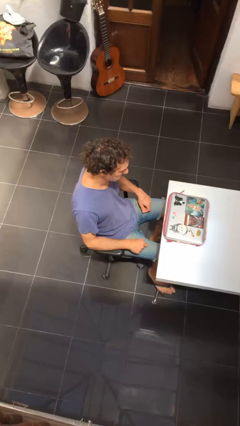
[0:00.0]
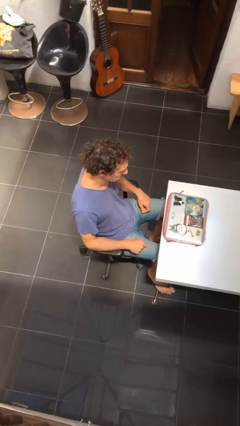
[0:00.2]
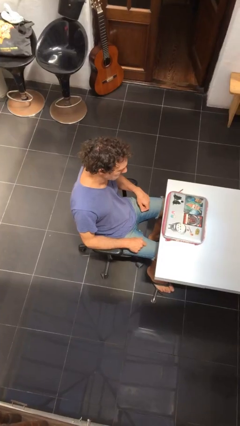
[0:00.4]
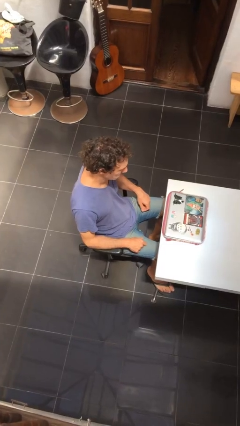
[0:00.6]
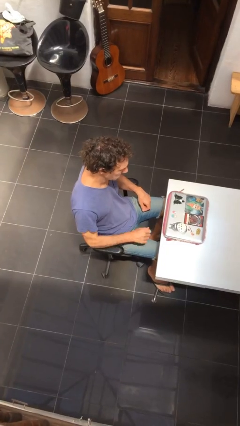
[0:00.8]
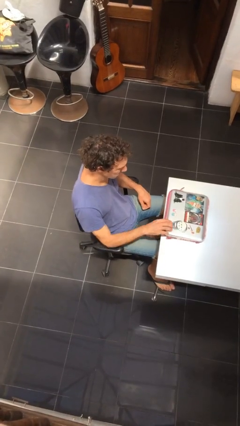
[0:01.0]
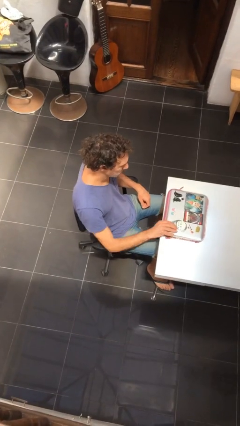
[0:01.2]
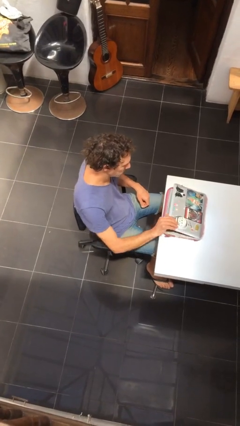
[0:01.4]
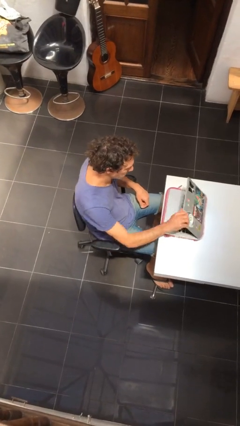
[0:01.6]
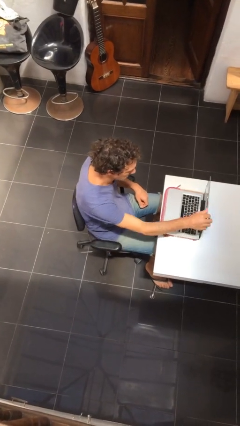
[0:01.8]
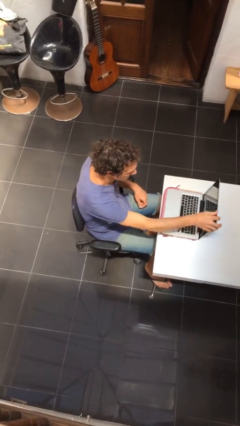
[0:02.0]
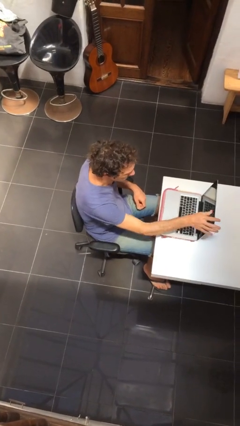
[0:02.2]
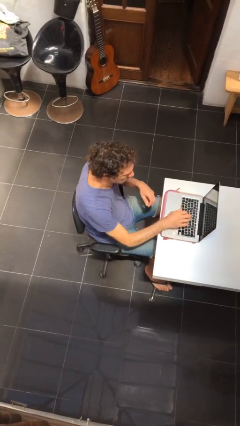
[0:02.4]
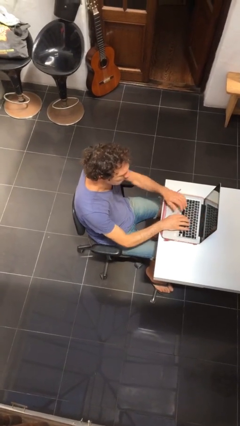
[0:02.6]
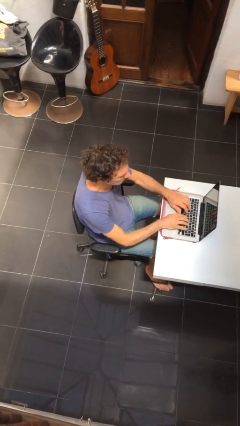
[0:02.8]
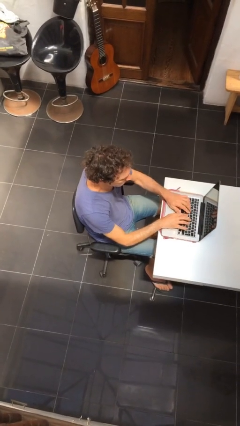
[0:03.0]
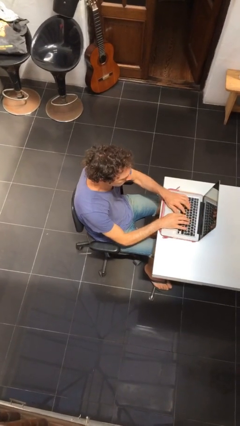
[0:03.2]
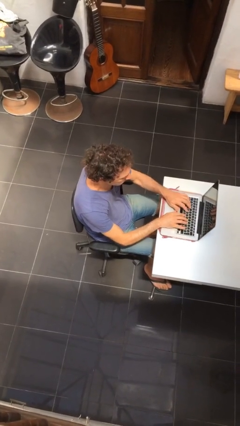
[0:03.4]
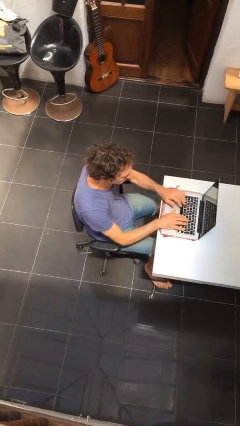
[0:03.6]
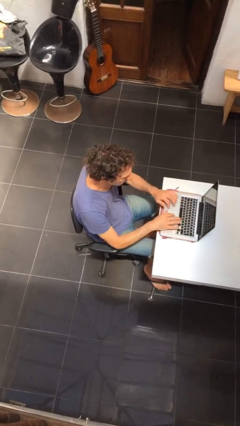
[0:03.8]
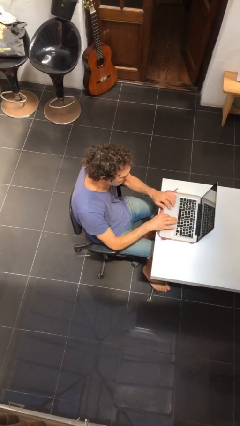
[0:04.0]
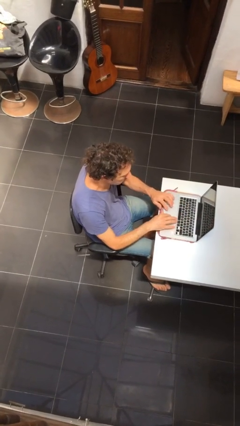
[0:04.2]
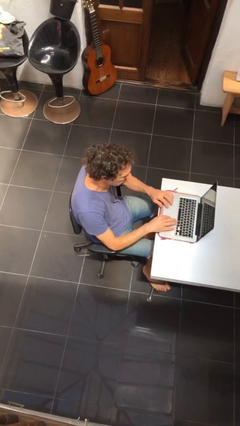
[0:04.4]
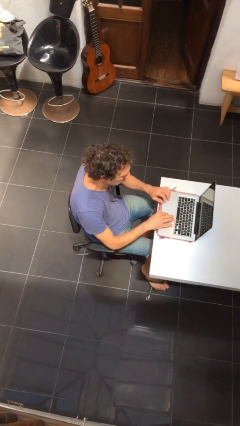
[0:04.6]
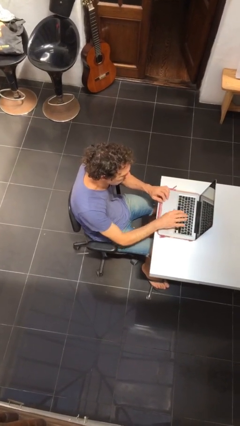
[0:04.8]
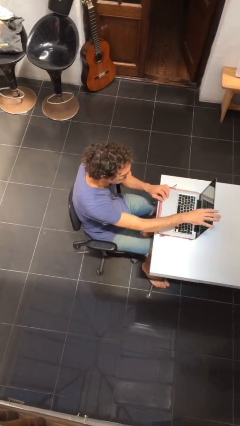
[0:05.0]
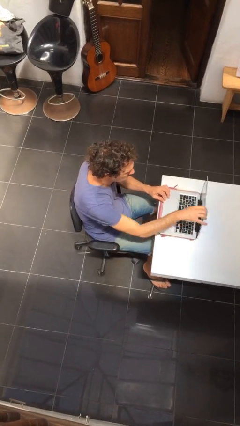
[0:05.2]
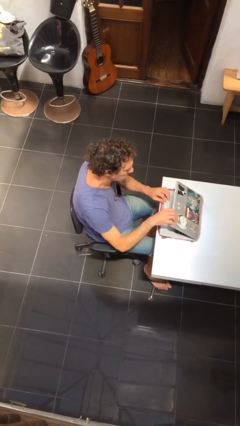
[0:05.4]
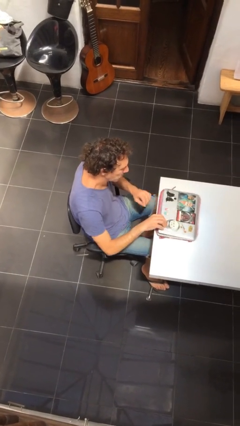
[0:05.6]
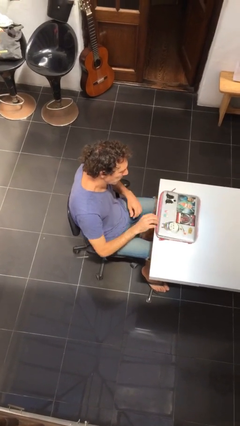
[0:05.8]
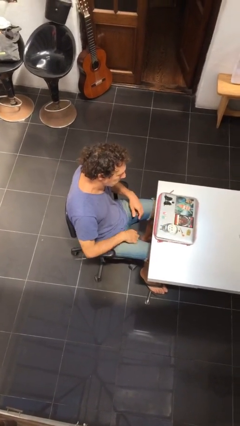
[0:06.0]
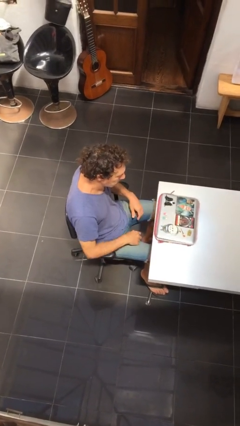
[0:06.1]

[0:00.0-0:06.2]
person interacts with laptop

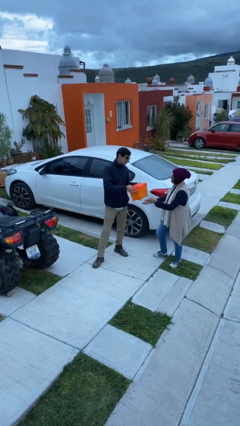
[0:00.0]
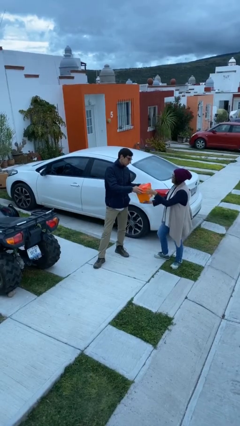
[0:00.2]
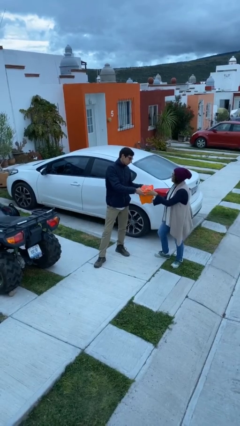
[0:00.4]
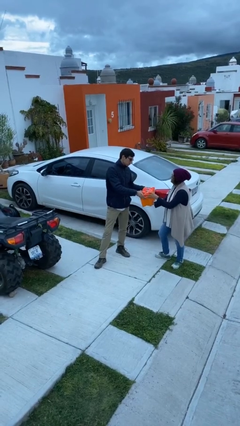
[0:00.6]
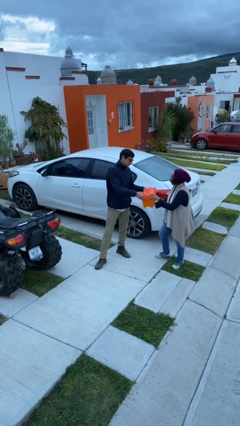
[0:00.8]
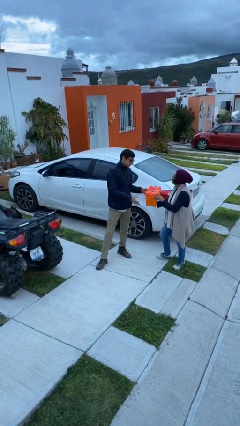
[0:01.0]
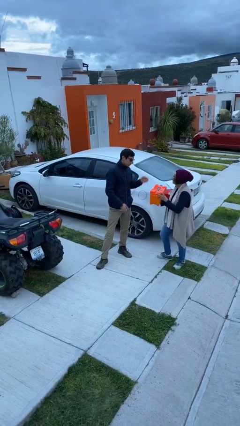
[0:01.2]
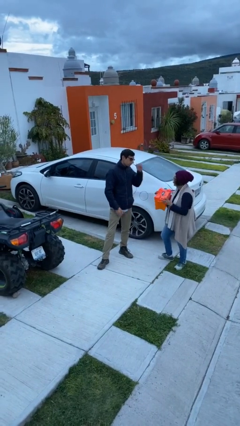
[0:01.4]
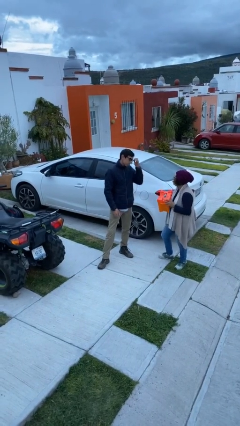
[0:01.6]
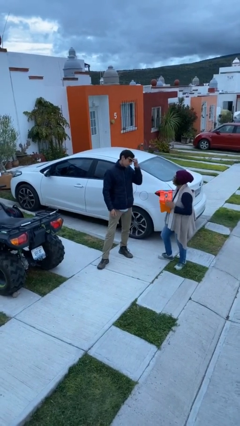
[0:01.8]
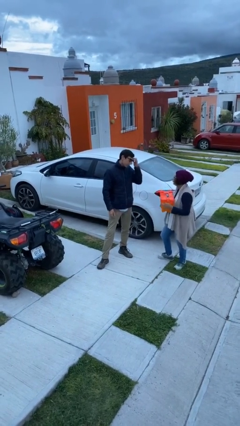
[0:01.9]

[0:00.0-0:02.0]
person transfers object to person

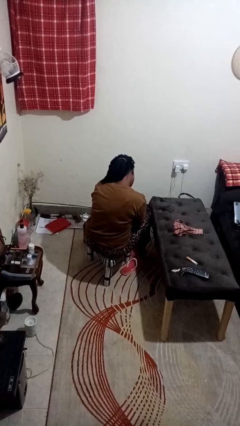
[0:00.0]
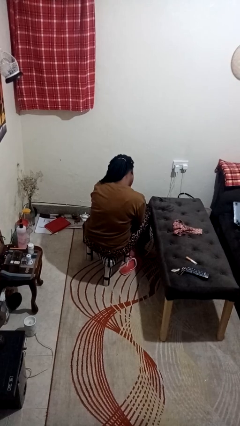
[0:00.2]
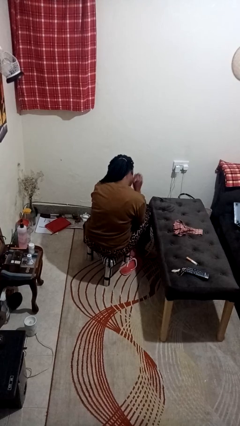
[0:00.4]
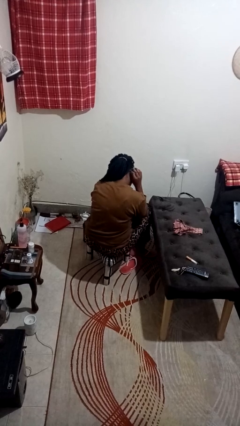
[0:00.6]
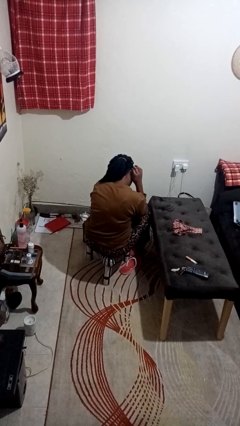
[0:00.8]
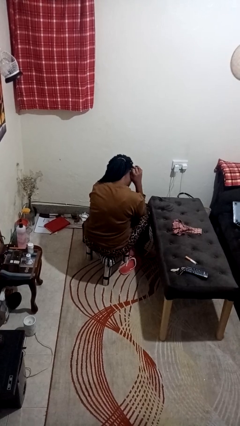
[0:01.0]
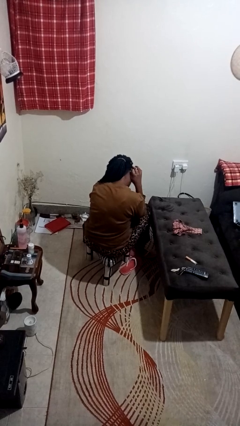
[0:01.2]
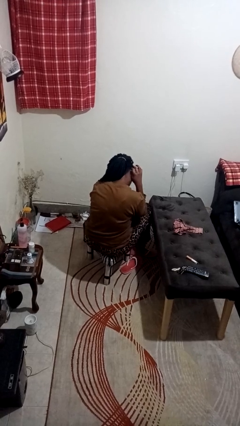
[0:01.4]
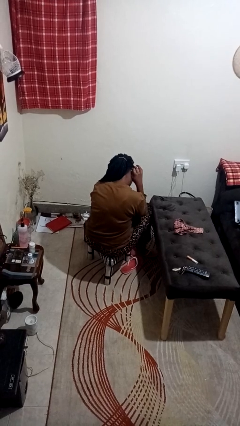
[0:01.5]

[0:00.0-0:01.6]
person gestures listen closely

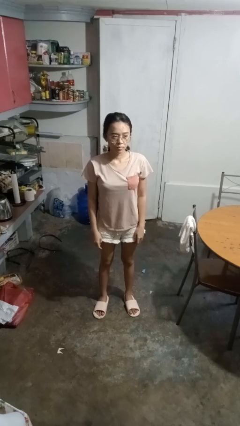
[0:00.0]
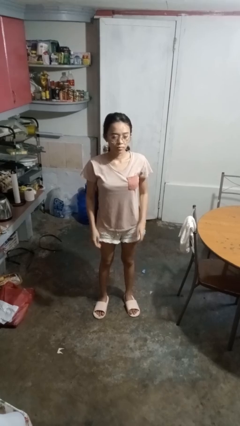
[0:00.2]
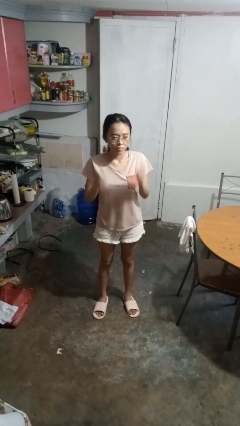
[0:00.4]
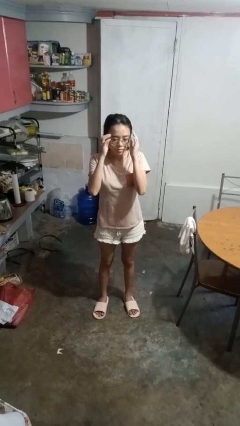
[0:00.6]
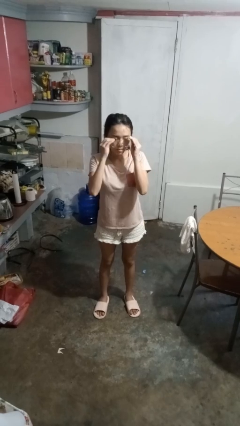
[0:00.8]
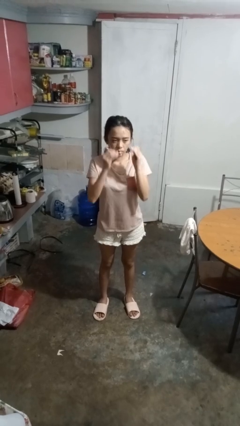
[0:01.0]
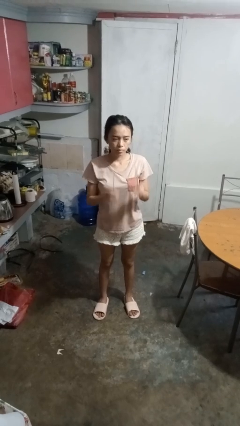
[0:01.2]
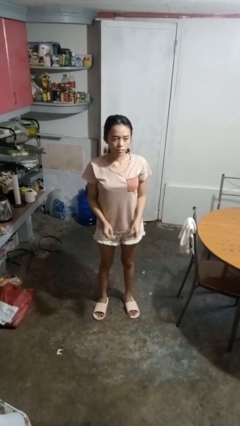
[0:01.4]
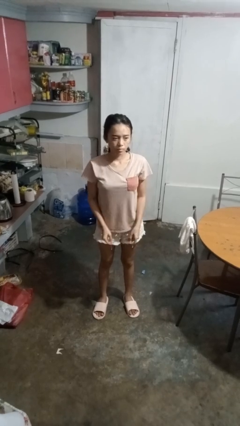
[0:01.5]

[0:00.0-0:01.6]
person takes off glasses

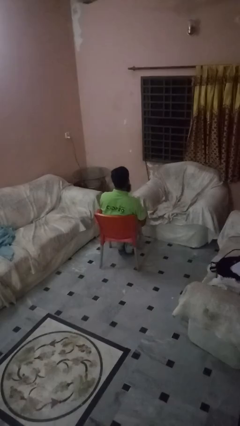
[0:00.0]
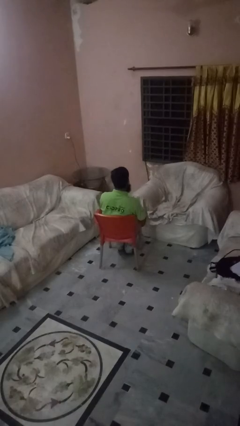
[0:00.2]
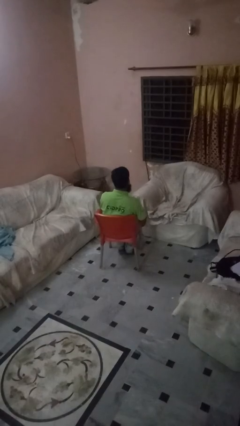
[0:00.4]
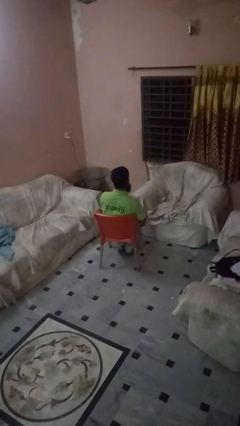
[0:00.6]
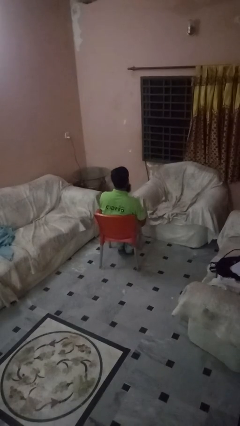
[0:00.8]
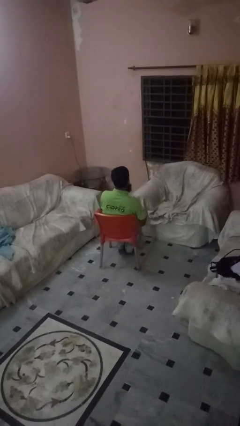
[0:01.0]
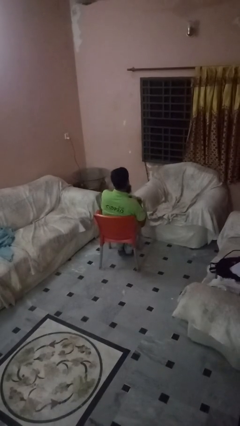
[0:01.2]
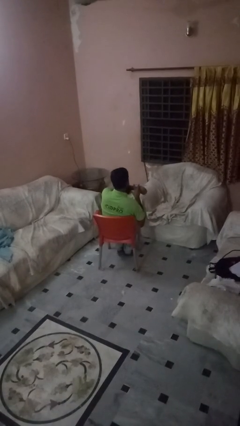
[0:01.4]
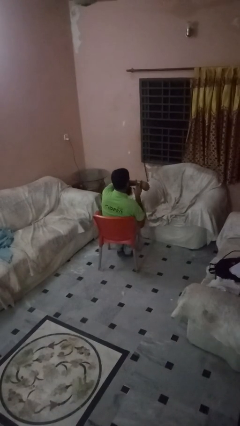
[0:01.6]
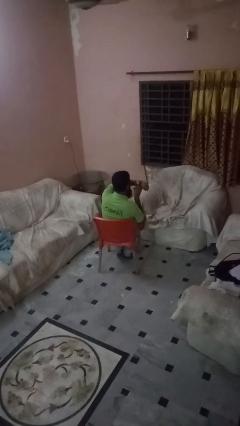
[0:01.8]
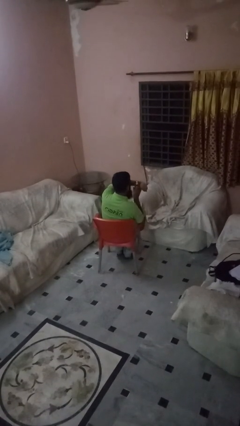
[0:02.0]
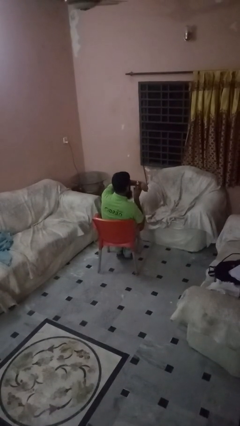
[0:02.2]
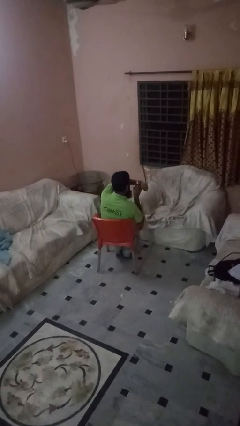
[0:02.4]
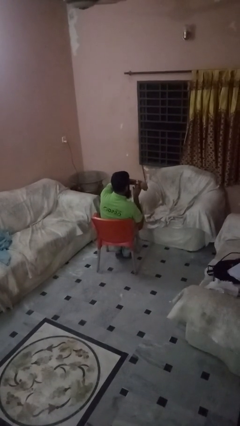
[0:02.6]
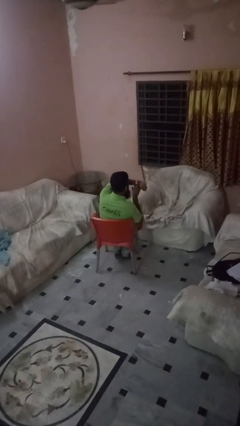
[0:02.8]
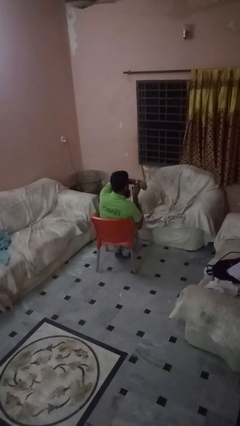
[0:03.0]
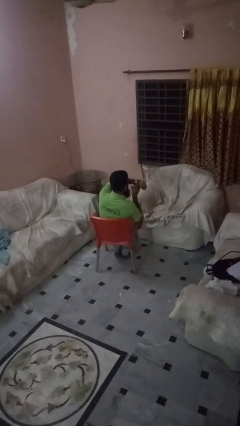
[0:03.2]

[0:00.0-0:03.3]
person gestures watch closely

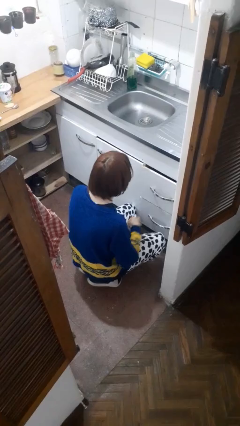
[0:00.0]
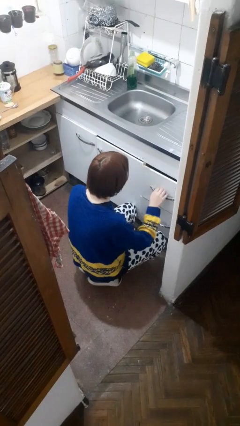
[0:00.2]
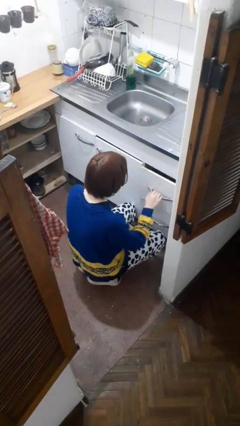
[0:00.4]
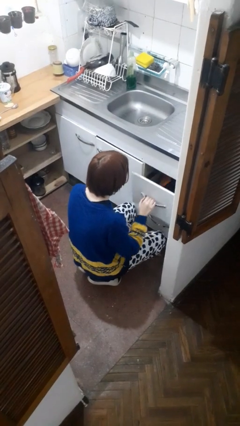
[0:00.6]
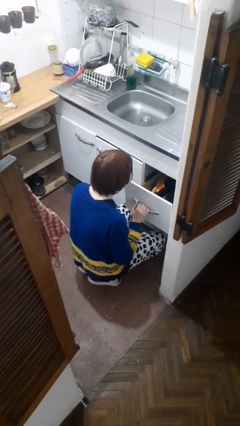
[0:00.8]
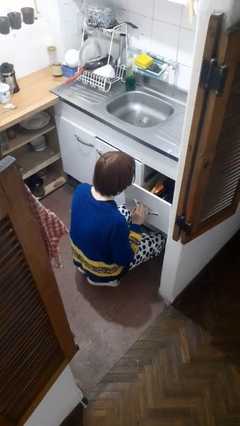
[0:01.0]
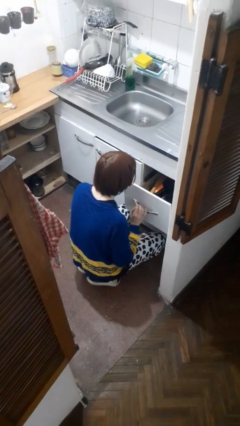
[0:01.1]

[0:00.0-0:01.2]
person opens kitchen drawer

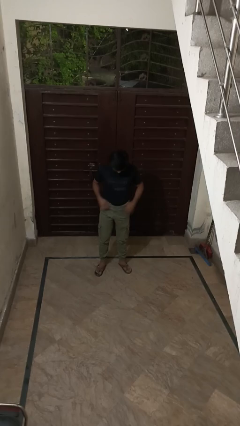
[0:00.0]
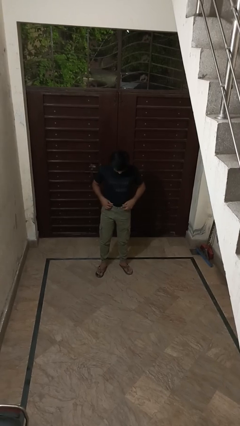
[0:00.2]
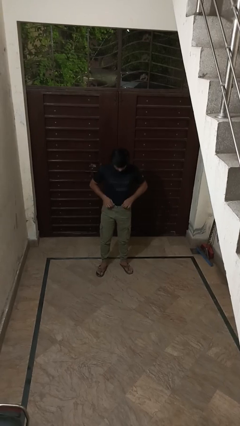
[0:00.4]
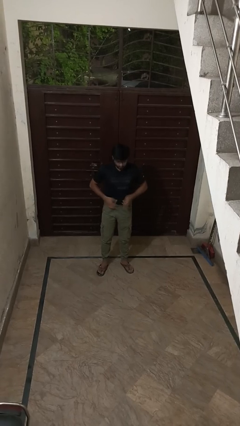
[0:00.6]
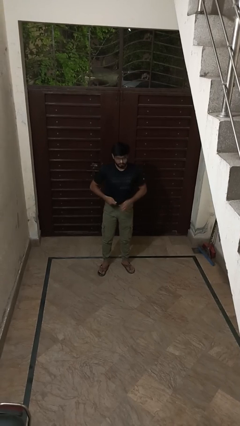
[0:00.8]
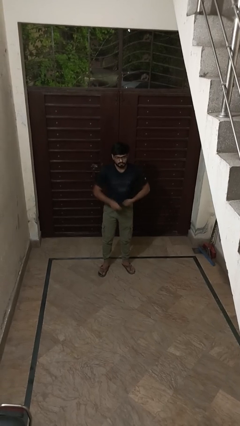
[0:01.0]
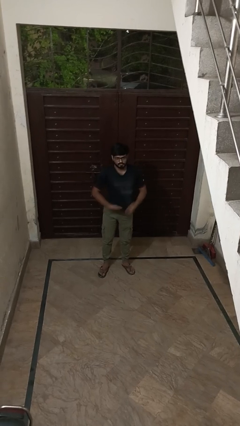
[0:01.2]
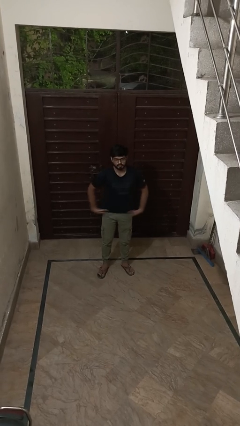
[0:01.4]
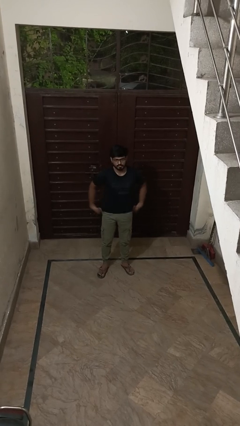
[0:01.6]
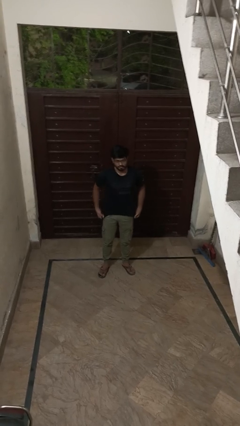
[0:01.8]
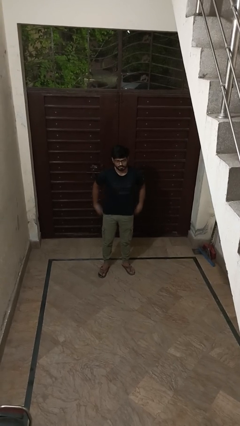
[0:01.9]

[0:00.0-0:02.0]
person untucks shirt
